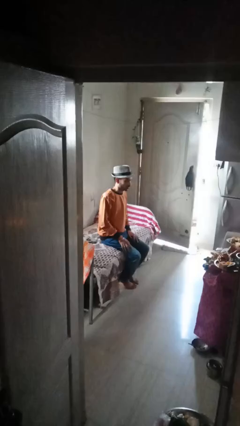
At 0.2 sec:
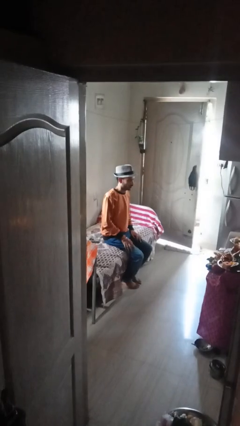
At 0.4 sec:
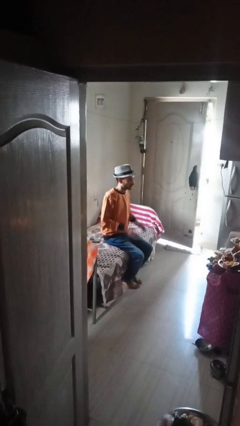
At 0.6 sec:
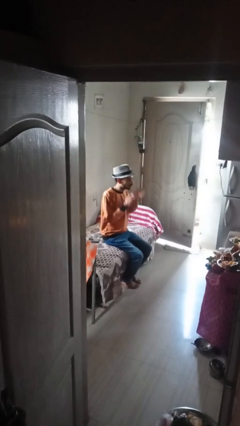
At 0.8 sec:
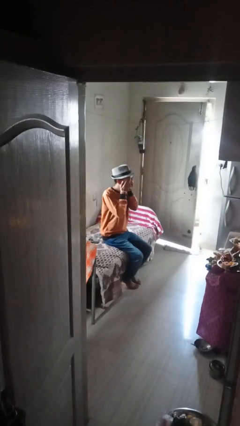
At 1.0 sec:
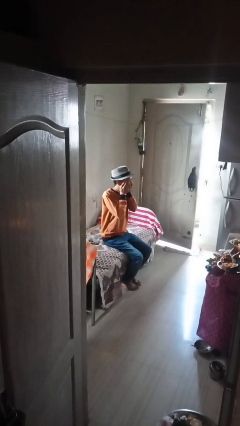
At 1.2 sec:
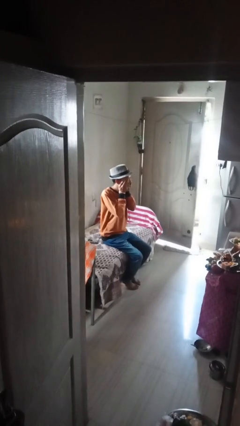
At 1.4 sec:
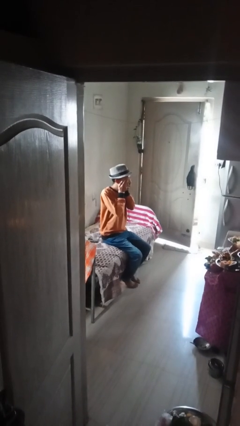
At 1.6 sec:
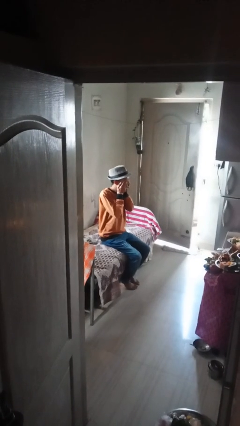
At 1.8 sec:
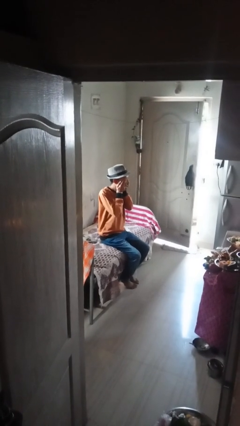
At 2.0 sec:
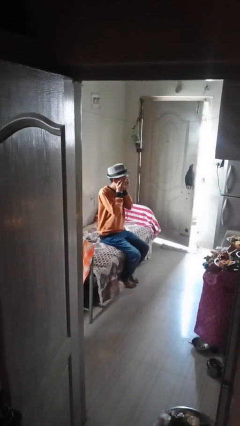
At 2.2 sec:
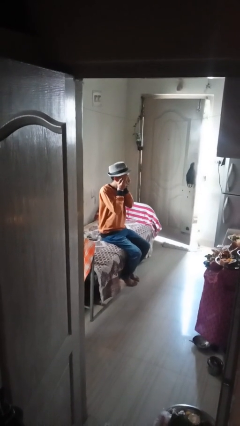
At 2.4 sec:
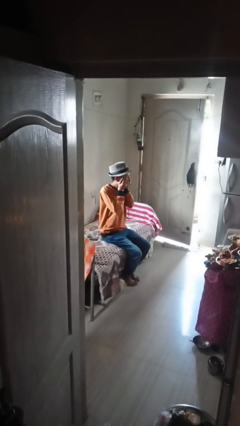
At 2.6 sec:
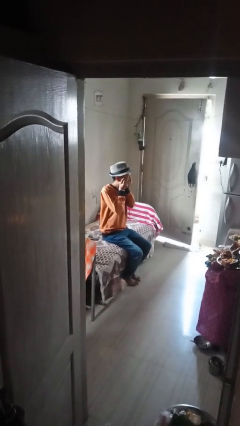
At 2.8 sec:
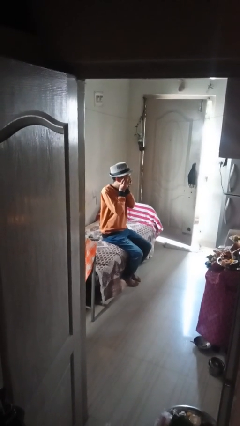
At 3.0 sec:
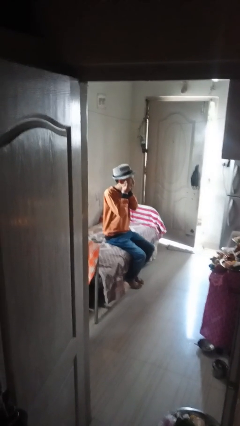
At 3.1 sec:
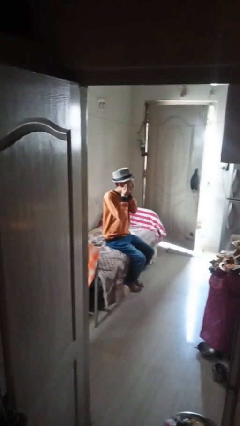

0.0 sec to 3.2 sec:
person covers face with hands

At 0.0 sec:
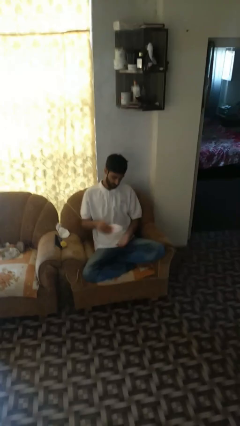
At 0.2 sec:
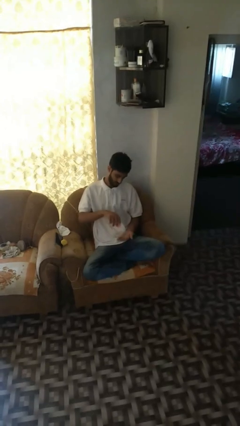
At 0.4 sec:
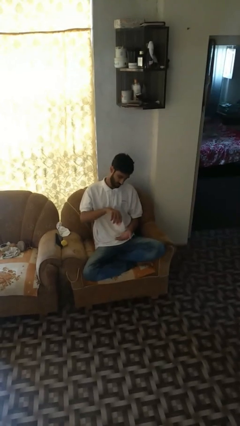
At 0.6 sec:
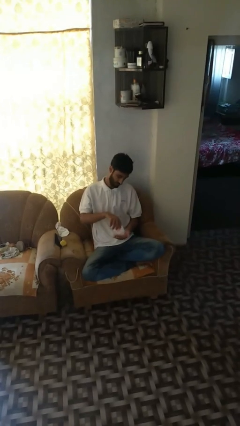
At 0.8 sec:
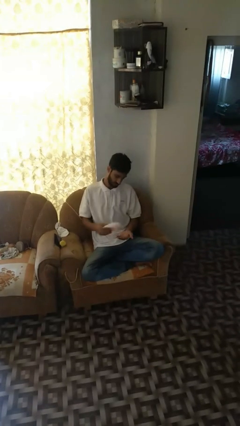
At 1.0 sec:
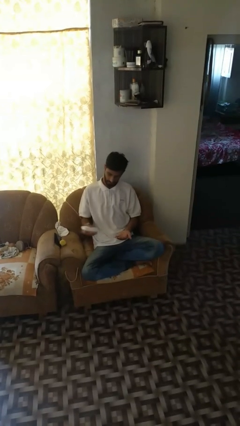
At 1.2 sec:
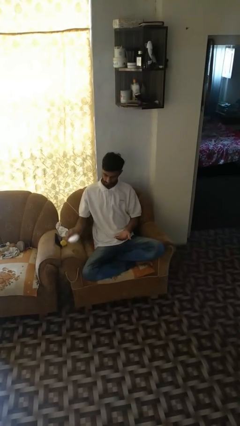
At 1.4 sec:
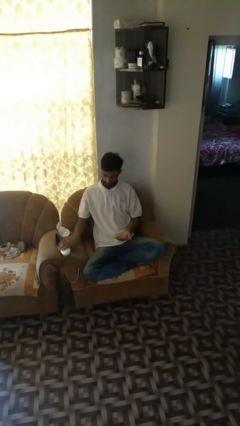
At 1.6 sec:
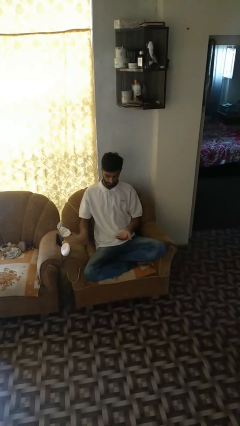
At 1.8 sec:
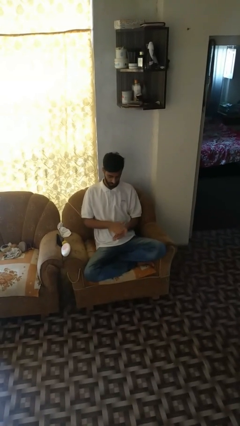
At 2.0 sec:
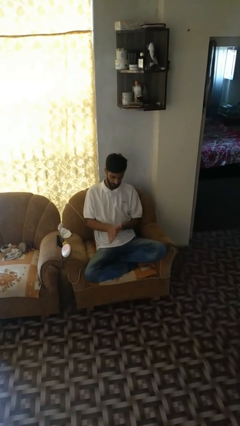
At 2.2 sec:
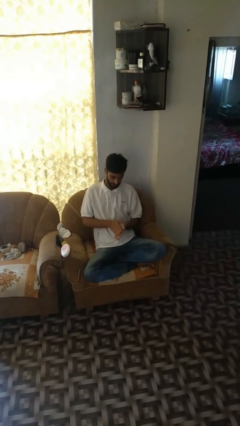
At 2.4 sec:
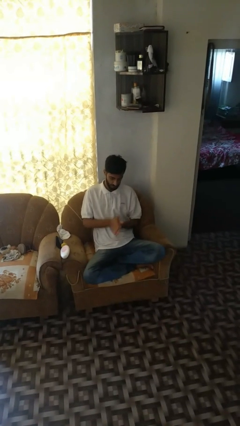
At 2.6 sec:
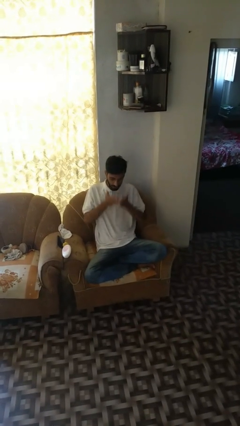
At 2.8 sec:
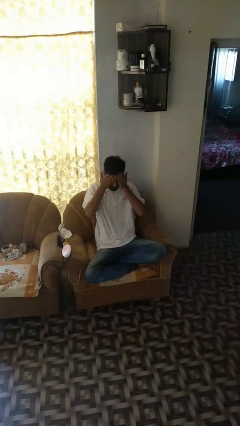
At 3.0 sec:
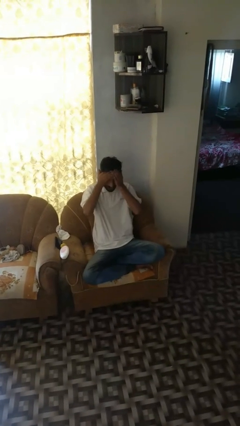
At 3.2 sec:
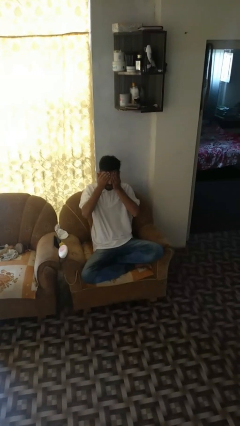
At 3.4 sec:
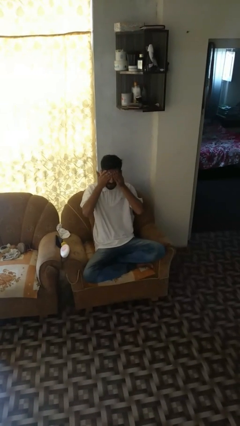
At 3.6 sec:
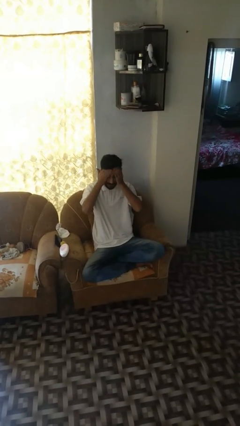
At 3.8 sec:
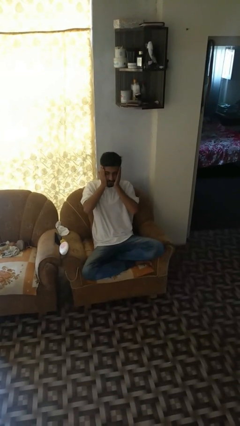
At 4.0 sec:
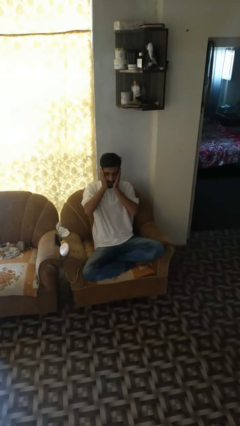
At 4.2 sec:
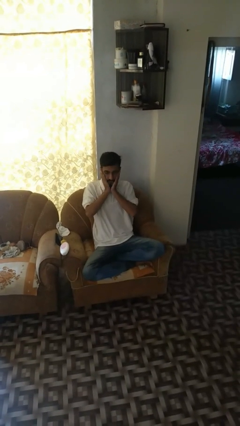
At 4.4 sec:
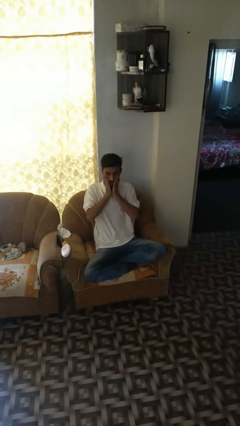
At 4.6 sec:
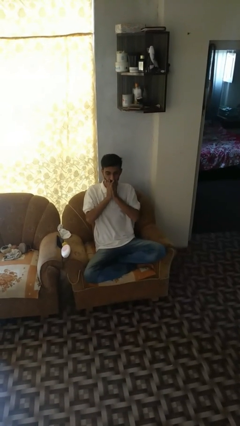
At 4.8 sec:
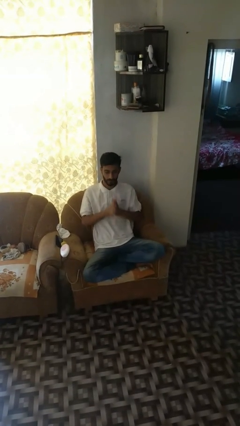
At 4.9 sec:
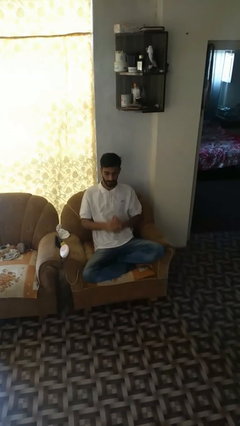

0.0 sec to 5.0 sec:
person applies sunscreen

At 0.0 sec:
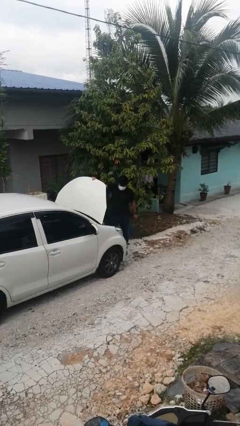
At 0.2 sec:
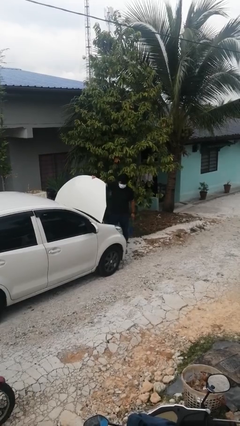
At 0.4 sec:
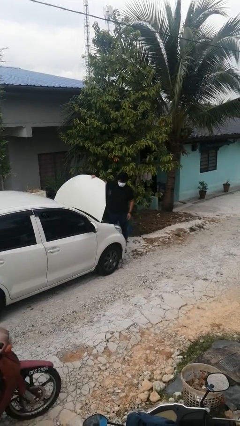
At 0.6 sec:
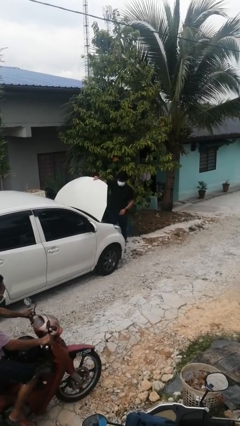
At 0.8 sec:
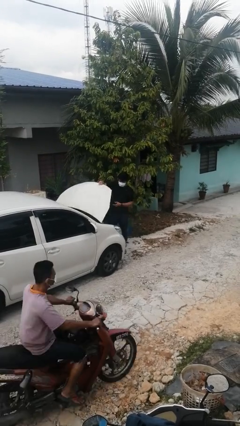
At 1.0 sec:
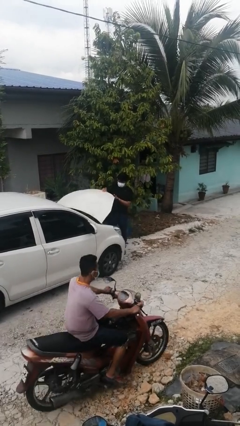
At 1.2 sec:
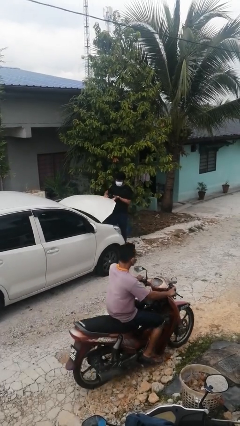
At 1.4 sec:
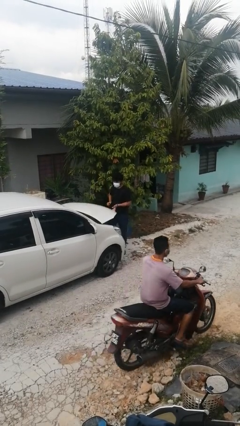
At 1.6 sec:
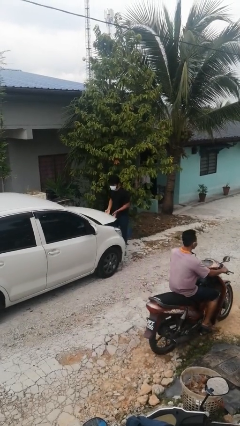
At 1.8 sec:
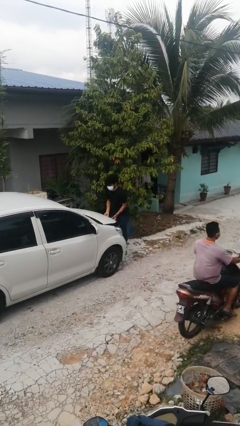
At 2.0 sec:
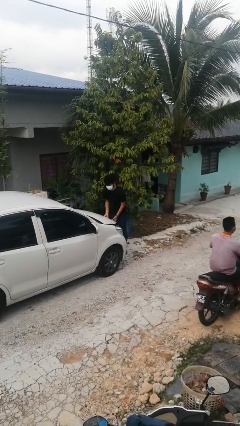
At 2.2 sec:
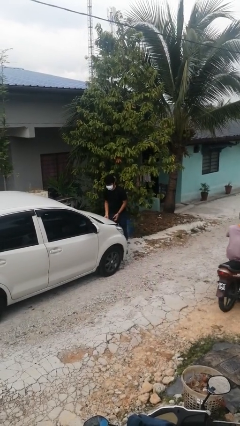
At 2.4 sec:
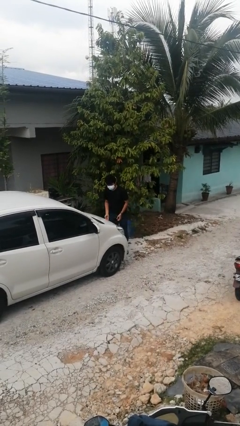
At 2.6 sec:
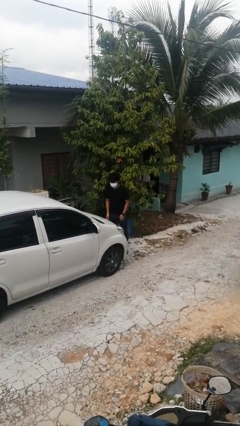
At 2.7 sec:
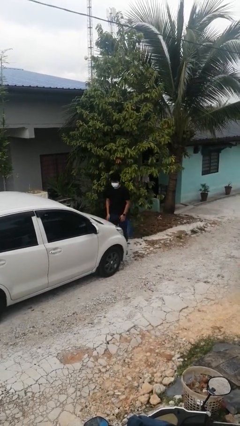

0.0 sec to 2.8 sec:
person closes car hood

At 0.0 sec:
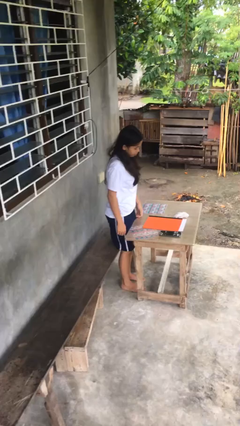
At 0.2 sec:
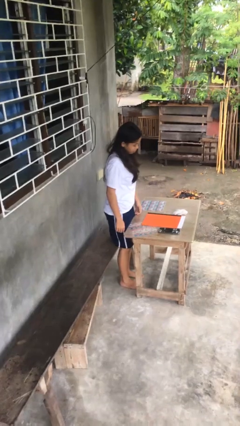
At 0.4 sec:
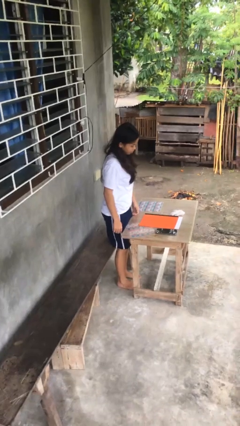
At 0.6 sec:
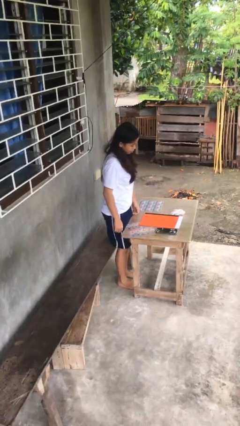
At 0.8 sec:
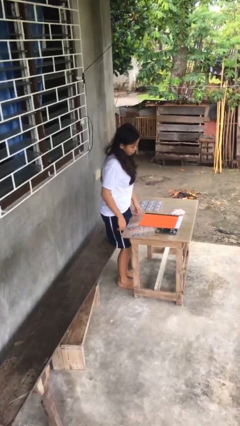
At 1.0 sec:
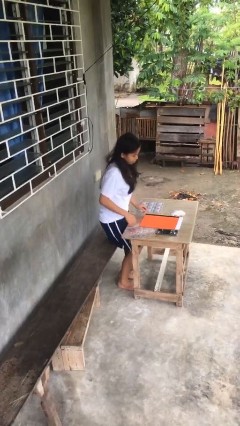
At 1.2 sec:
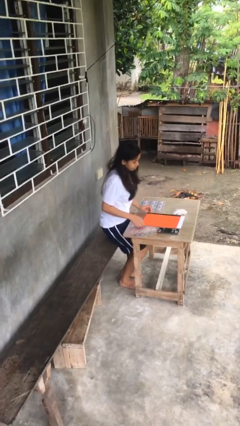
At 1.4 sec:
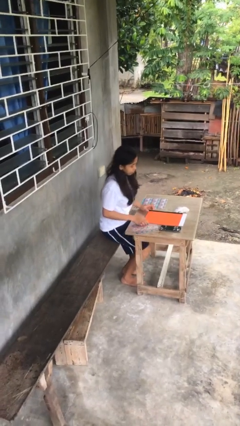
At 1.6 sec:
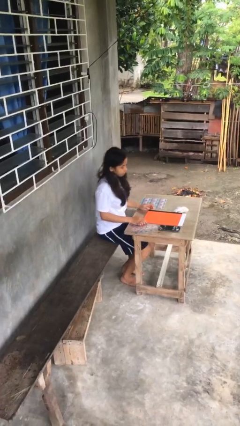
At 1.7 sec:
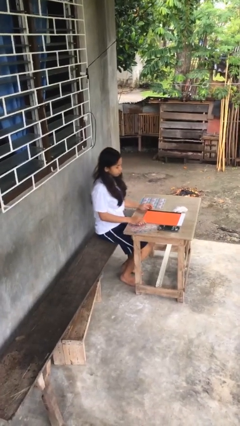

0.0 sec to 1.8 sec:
person sits down

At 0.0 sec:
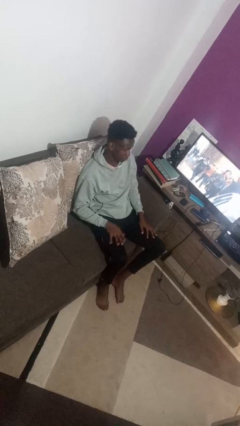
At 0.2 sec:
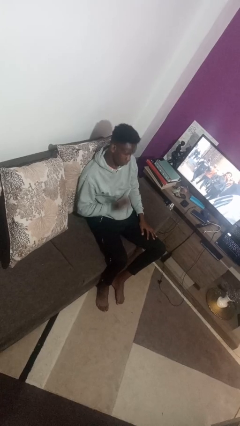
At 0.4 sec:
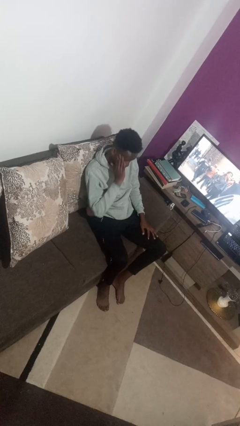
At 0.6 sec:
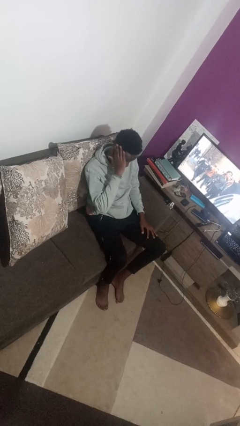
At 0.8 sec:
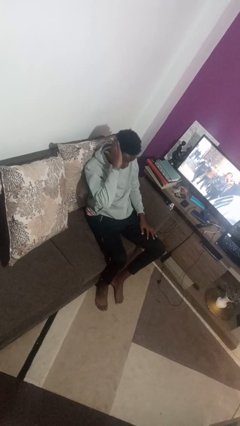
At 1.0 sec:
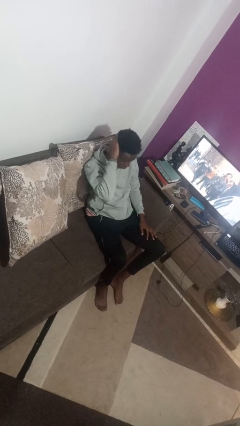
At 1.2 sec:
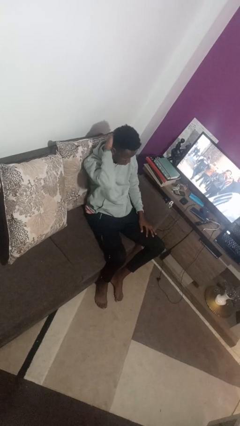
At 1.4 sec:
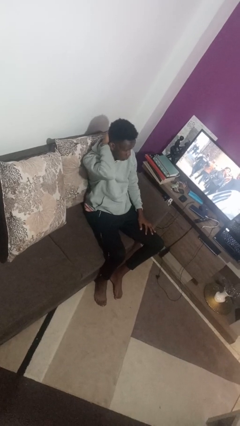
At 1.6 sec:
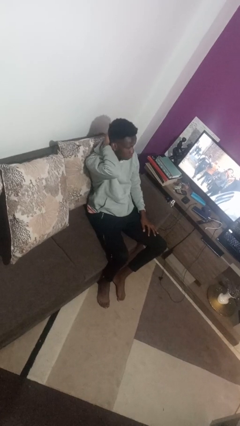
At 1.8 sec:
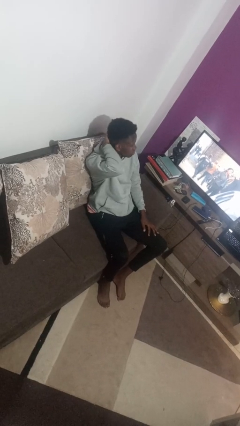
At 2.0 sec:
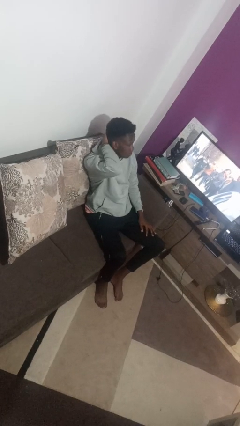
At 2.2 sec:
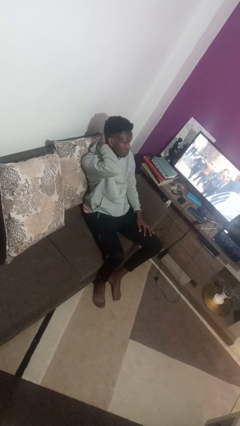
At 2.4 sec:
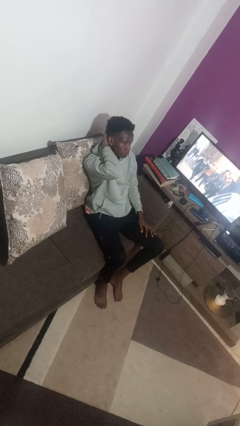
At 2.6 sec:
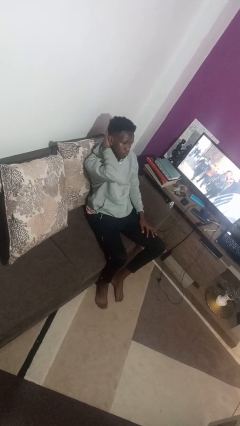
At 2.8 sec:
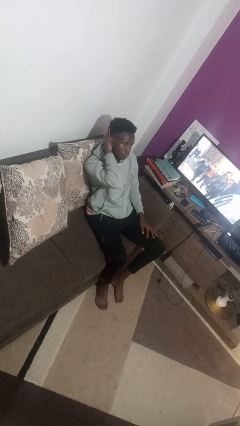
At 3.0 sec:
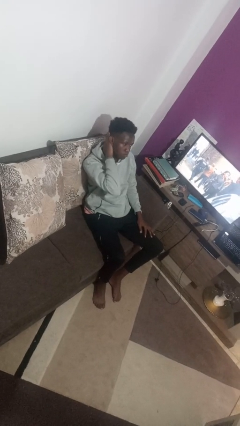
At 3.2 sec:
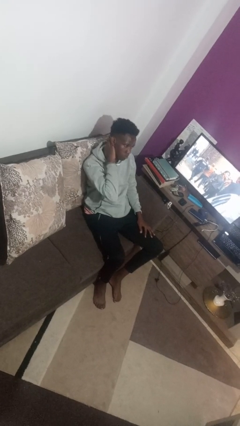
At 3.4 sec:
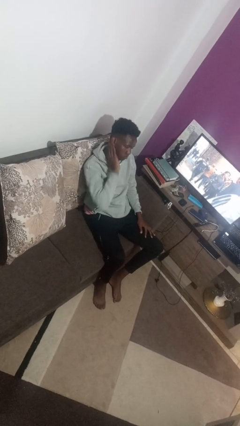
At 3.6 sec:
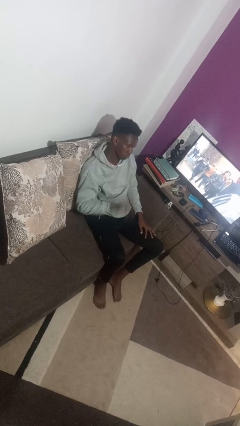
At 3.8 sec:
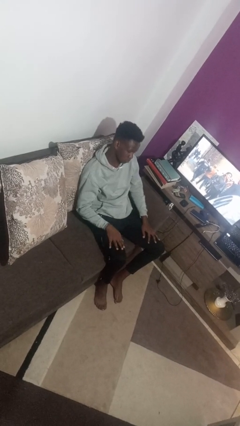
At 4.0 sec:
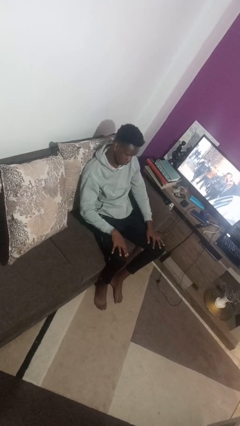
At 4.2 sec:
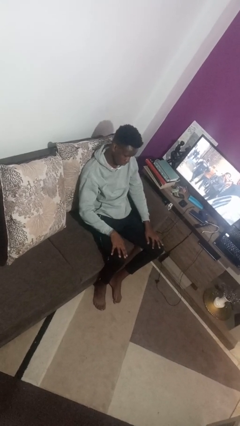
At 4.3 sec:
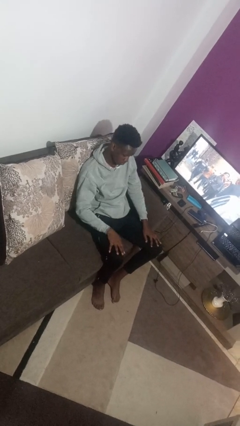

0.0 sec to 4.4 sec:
person strokes hair

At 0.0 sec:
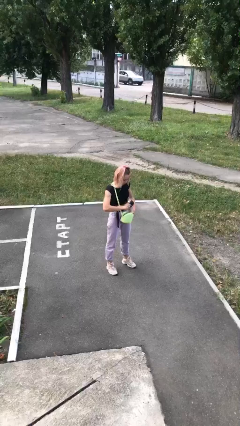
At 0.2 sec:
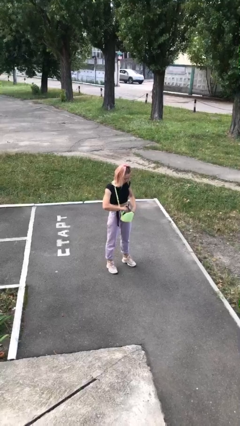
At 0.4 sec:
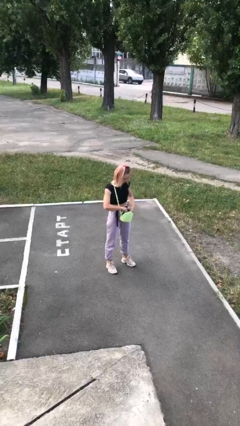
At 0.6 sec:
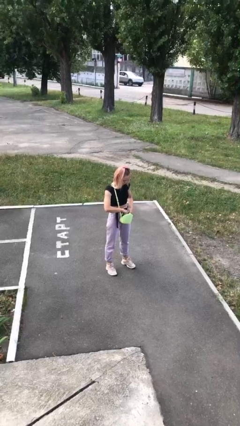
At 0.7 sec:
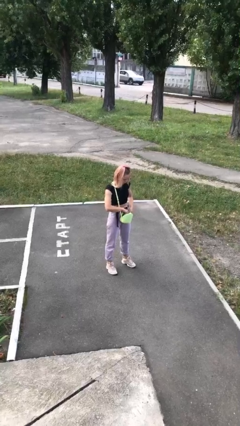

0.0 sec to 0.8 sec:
person puts object into backpack
